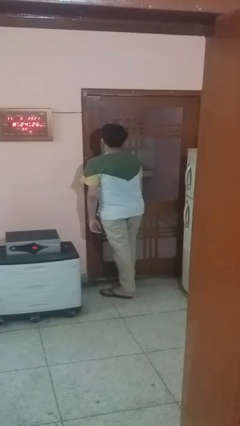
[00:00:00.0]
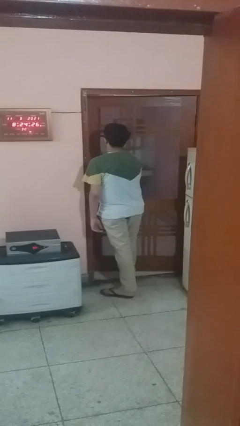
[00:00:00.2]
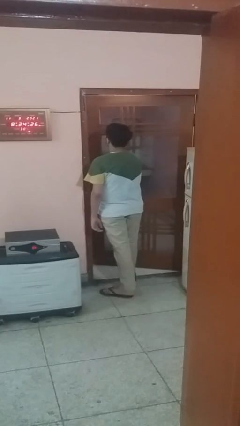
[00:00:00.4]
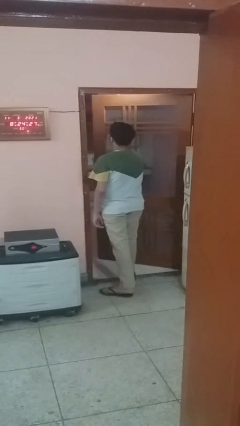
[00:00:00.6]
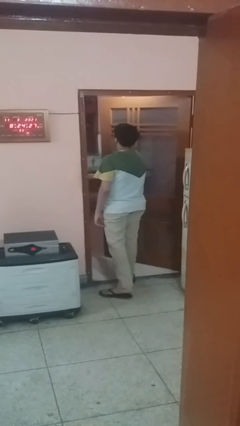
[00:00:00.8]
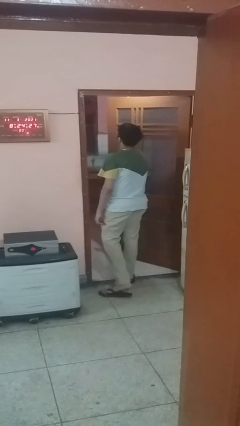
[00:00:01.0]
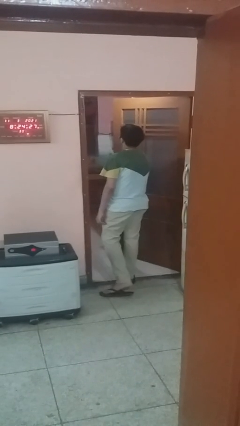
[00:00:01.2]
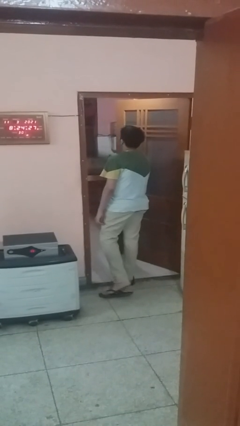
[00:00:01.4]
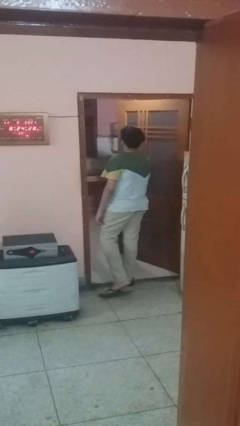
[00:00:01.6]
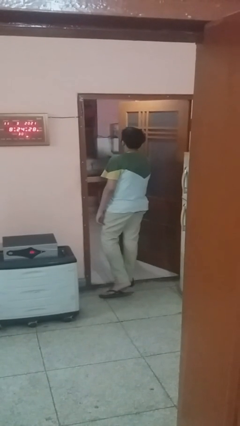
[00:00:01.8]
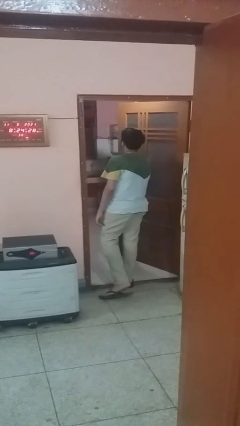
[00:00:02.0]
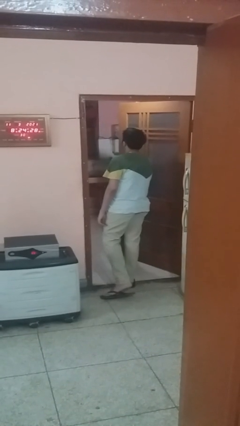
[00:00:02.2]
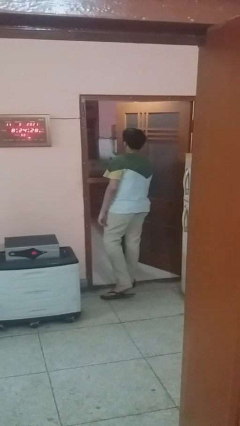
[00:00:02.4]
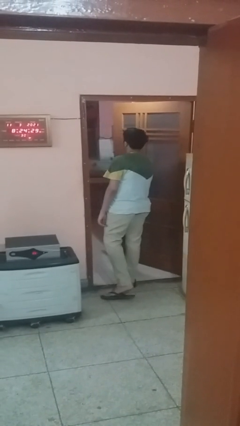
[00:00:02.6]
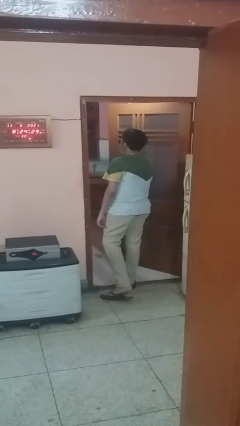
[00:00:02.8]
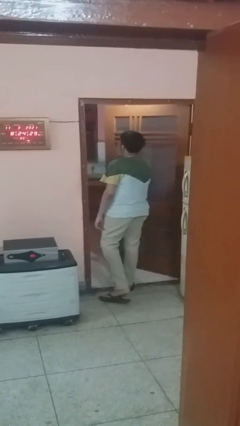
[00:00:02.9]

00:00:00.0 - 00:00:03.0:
person opens facility door

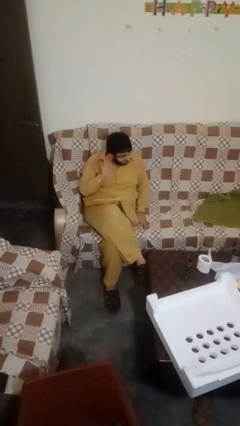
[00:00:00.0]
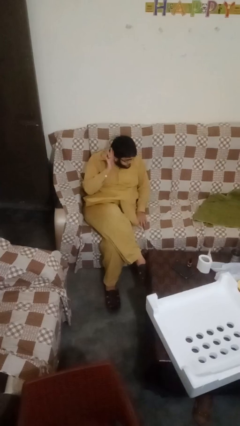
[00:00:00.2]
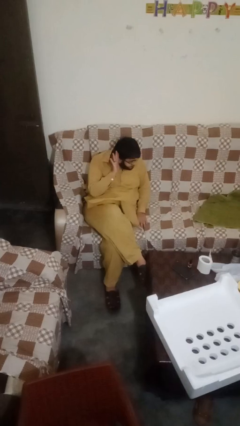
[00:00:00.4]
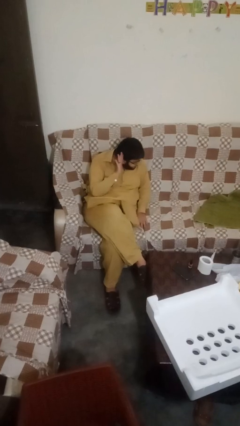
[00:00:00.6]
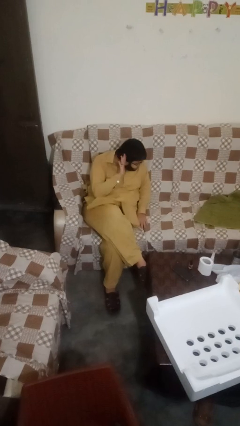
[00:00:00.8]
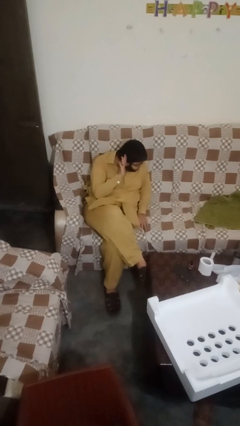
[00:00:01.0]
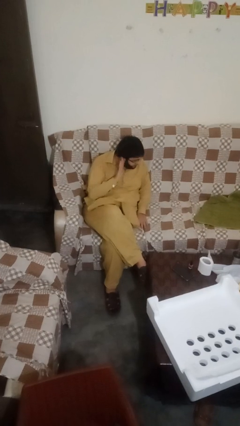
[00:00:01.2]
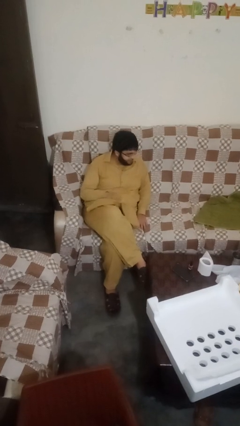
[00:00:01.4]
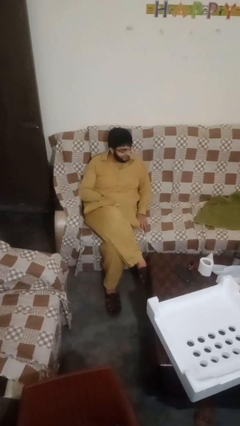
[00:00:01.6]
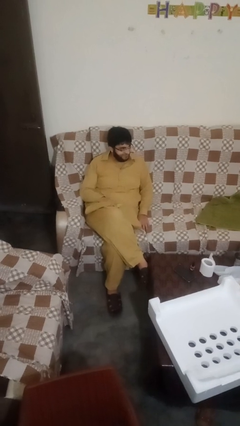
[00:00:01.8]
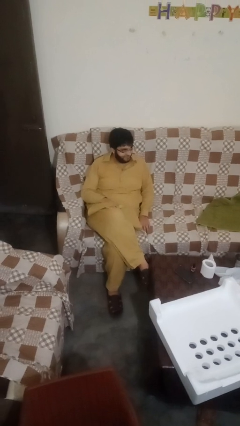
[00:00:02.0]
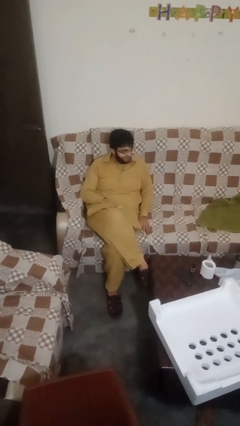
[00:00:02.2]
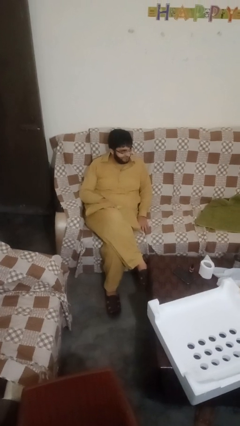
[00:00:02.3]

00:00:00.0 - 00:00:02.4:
person gestures listen closely

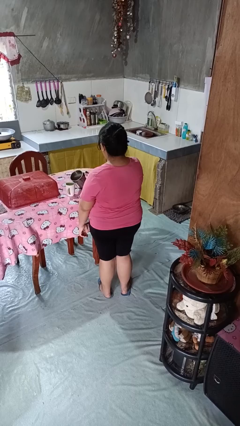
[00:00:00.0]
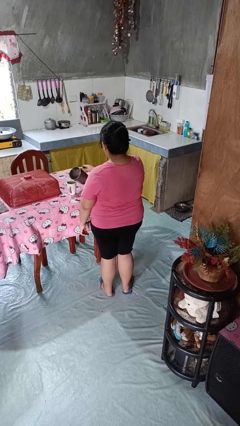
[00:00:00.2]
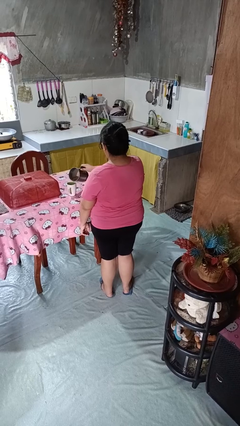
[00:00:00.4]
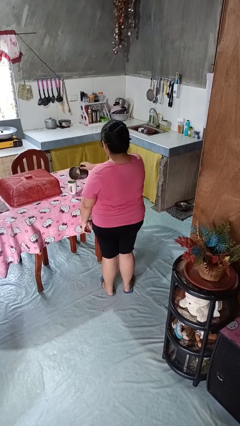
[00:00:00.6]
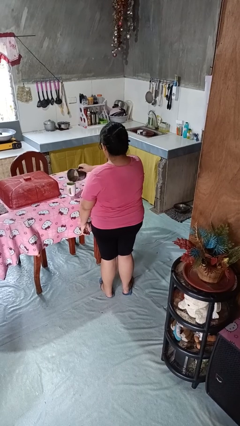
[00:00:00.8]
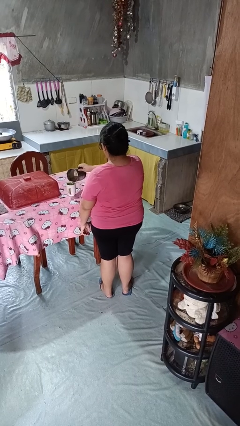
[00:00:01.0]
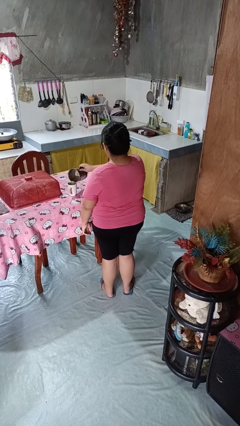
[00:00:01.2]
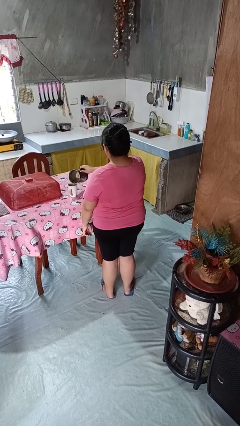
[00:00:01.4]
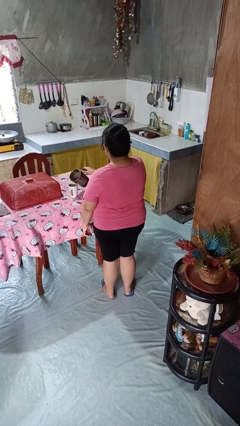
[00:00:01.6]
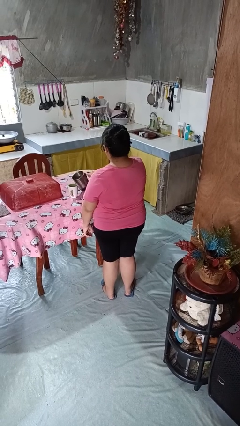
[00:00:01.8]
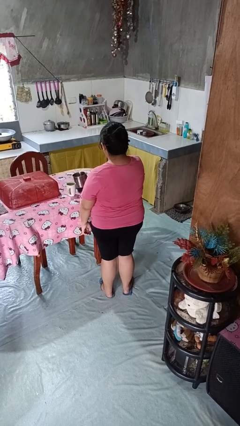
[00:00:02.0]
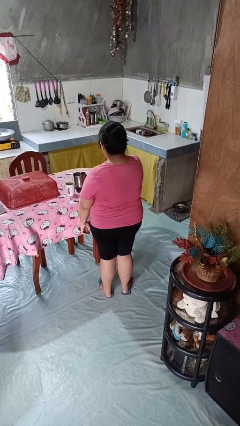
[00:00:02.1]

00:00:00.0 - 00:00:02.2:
person pours coffee into mug

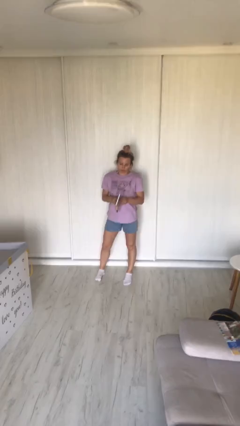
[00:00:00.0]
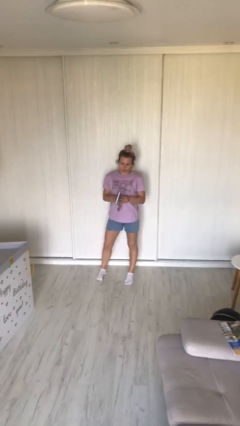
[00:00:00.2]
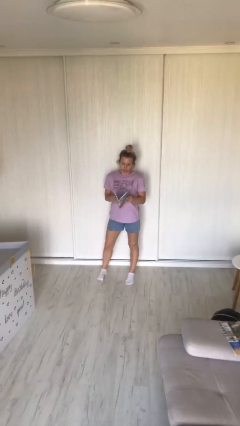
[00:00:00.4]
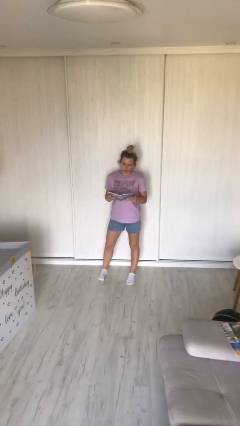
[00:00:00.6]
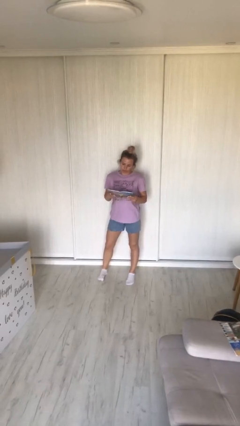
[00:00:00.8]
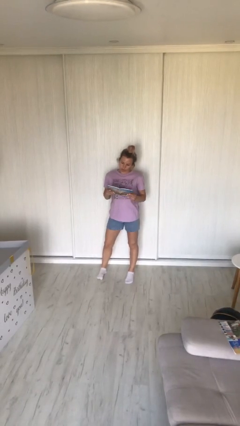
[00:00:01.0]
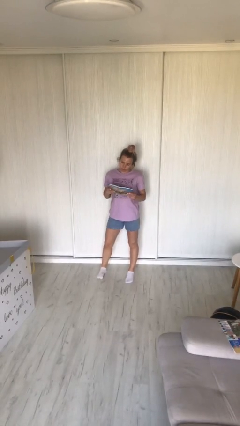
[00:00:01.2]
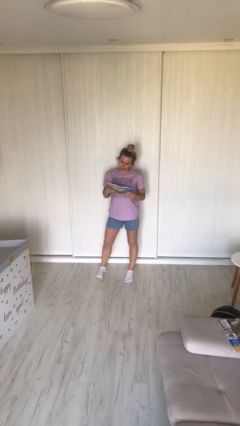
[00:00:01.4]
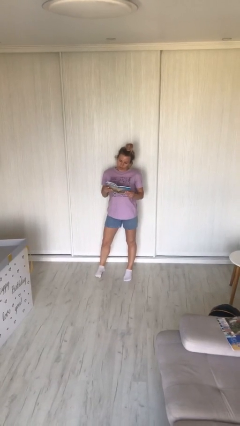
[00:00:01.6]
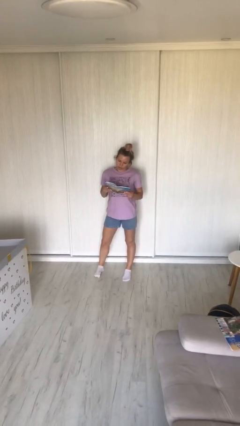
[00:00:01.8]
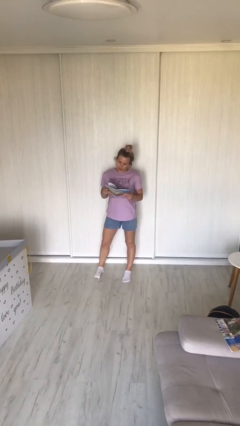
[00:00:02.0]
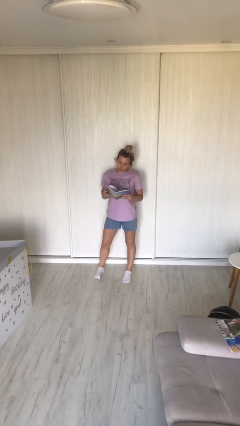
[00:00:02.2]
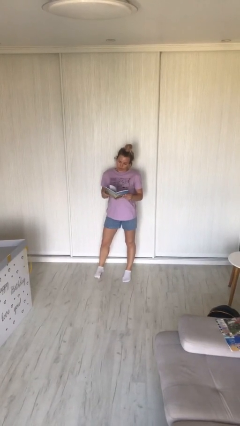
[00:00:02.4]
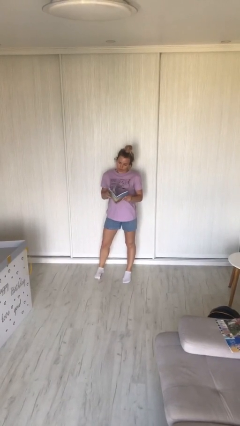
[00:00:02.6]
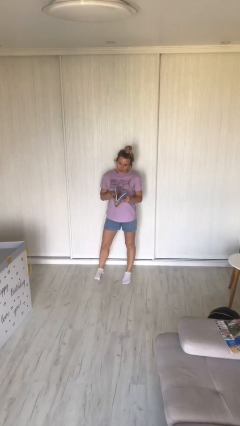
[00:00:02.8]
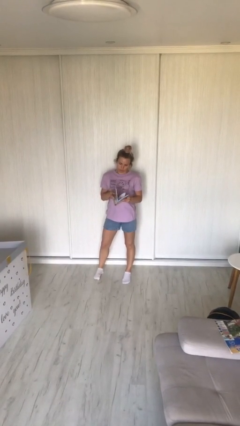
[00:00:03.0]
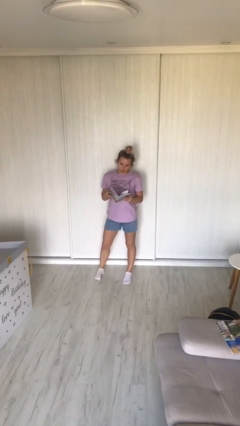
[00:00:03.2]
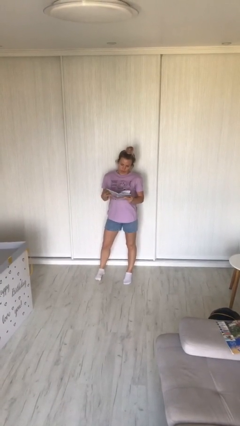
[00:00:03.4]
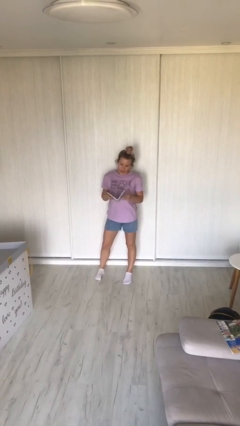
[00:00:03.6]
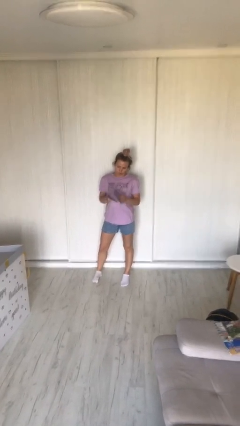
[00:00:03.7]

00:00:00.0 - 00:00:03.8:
person reads book

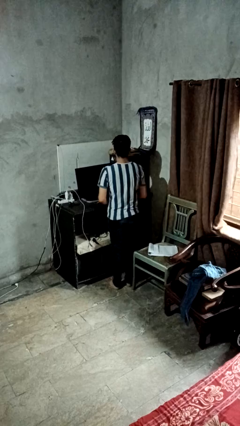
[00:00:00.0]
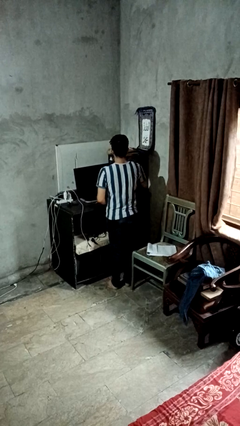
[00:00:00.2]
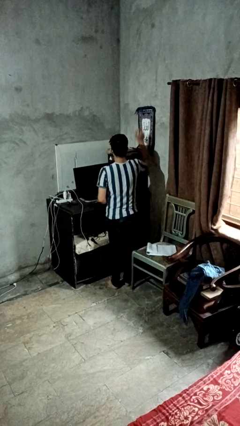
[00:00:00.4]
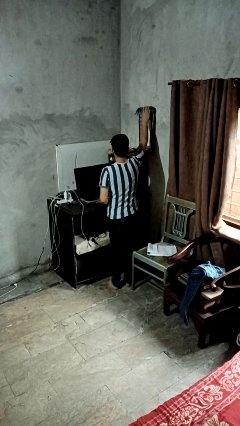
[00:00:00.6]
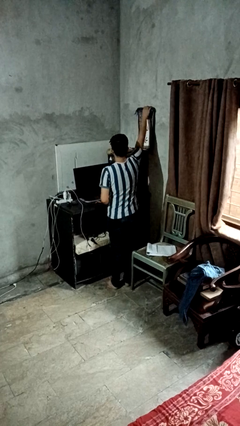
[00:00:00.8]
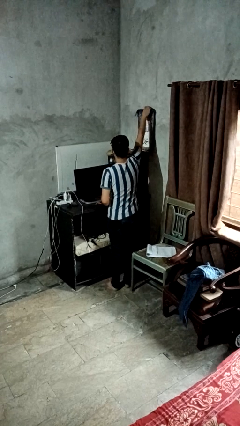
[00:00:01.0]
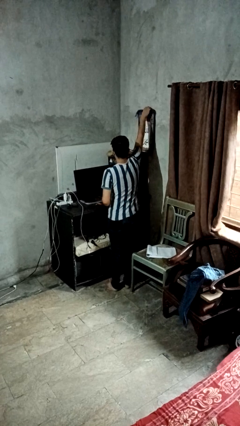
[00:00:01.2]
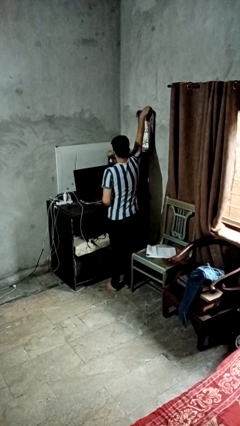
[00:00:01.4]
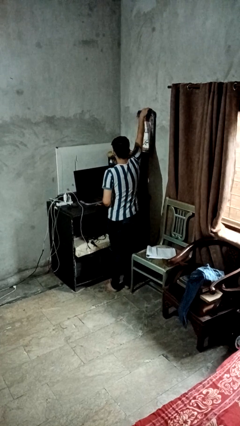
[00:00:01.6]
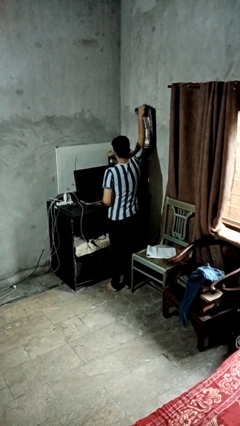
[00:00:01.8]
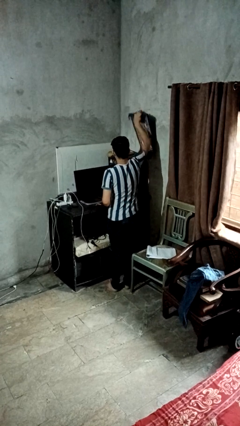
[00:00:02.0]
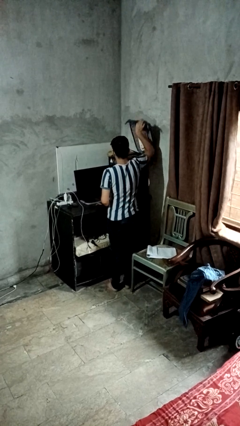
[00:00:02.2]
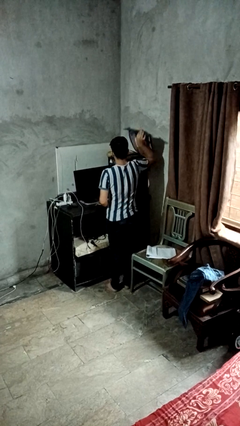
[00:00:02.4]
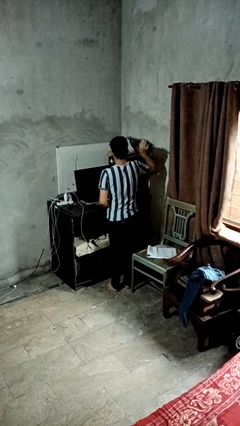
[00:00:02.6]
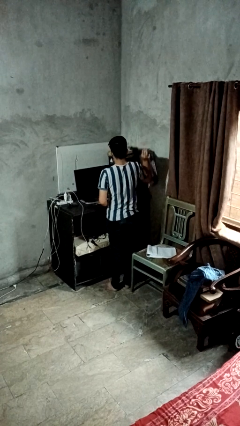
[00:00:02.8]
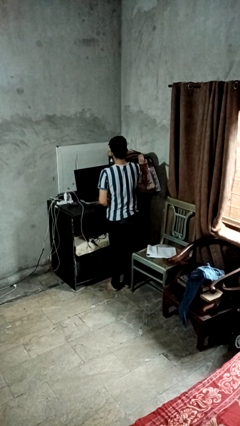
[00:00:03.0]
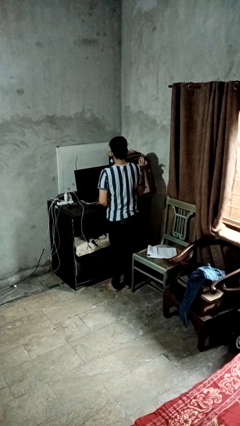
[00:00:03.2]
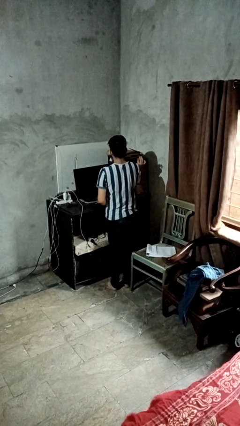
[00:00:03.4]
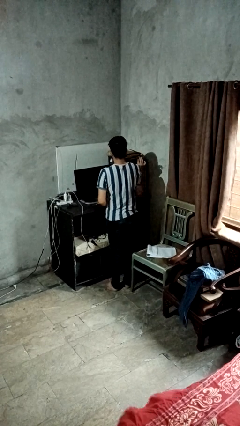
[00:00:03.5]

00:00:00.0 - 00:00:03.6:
person takes down picture frame

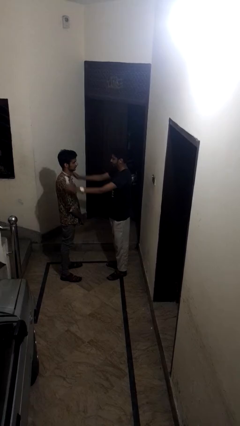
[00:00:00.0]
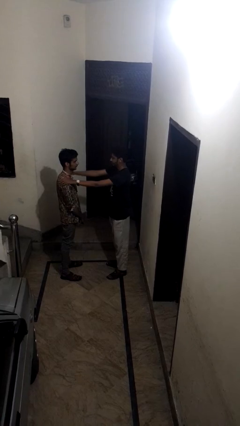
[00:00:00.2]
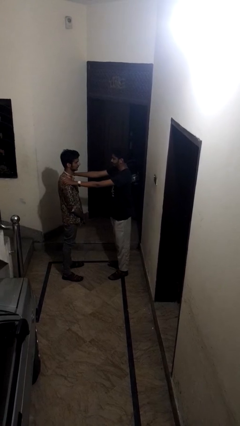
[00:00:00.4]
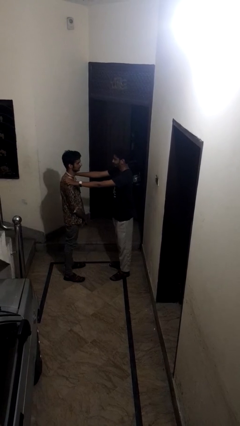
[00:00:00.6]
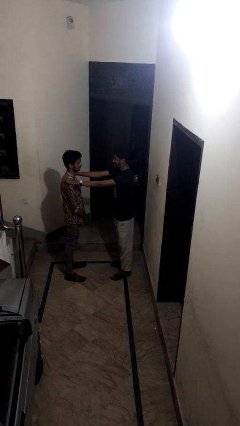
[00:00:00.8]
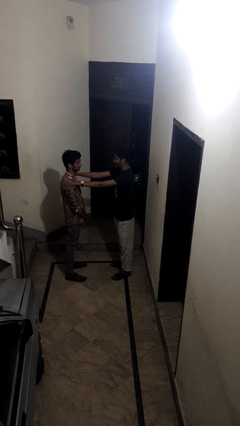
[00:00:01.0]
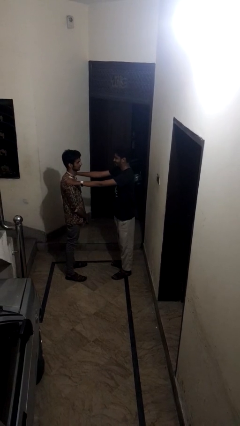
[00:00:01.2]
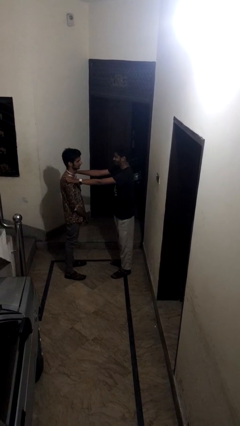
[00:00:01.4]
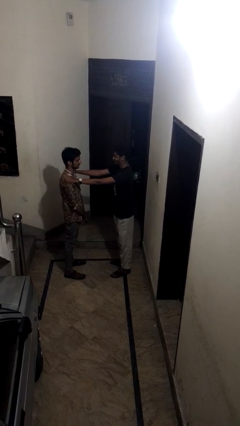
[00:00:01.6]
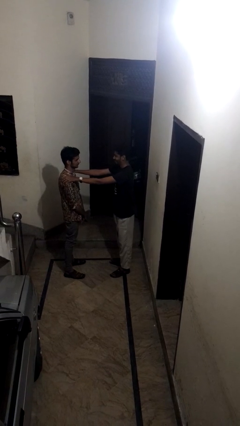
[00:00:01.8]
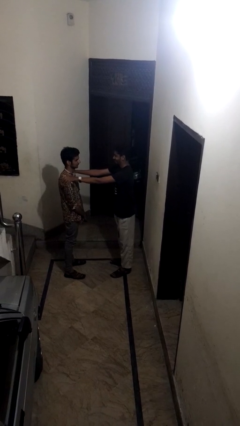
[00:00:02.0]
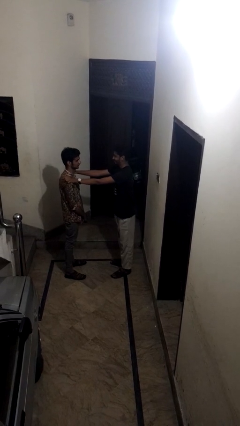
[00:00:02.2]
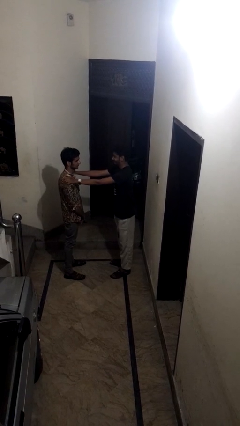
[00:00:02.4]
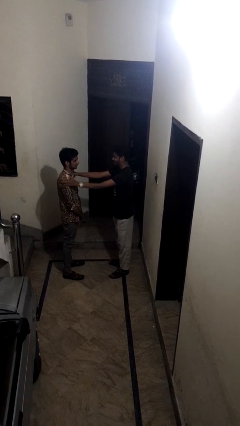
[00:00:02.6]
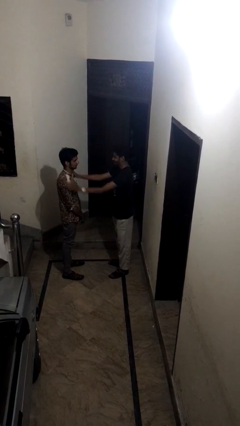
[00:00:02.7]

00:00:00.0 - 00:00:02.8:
person pounds shoulders of person
